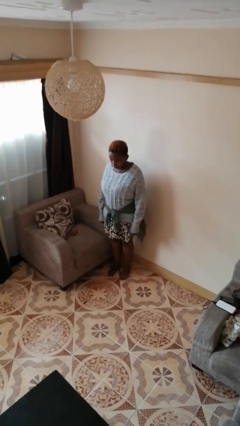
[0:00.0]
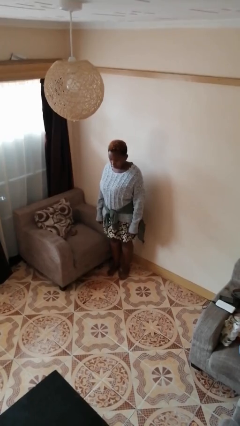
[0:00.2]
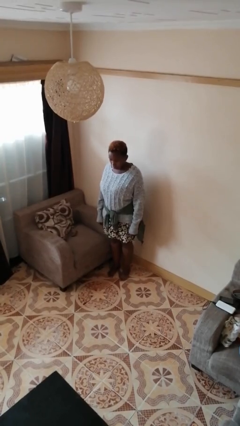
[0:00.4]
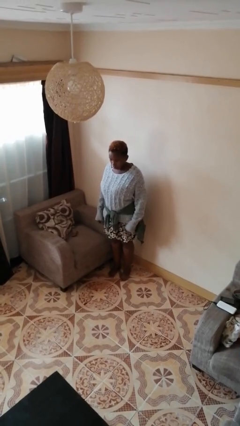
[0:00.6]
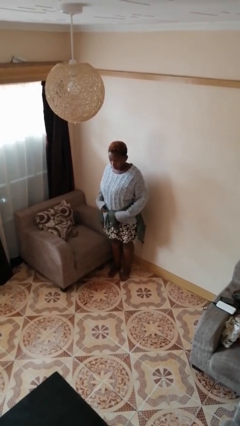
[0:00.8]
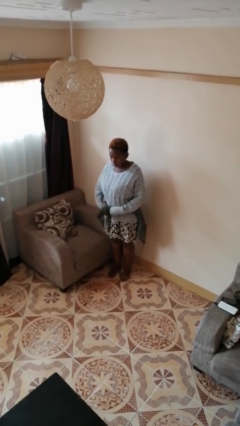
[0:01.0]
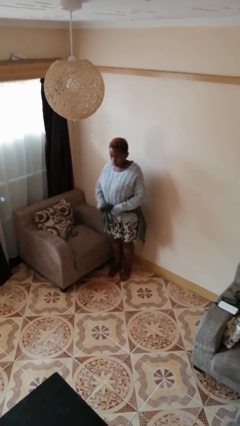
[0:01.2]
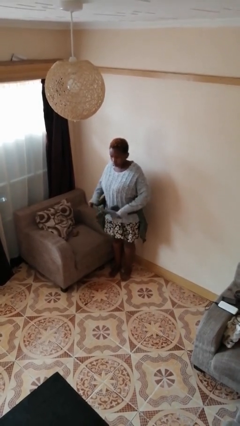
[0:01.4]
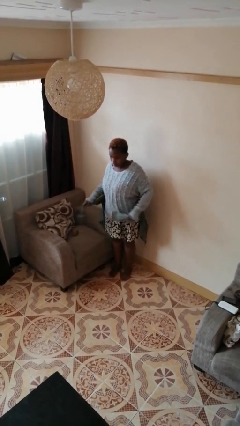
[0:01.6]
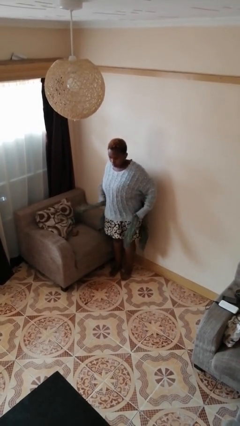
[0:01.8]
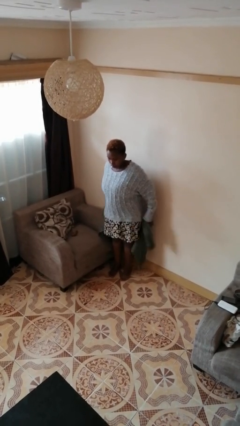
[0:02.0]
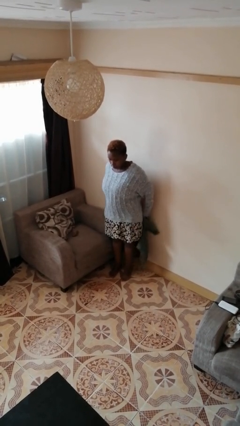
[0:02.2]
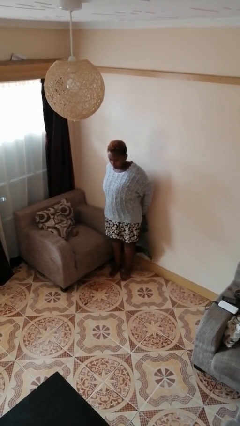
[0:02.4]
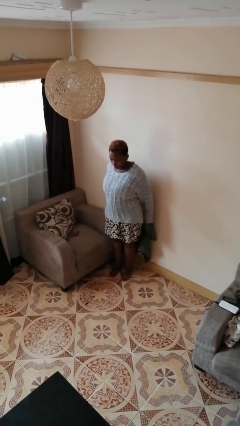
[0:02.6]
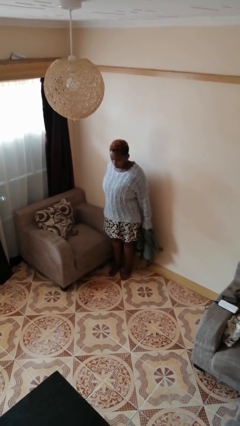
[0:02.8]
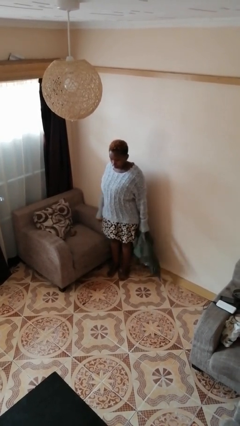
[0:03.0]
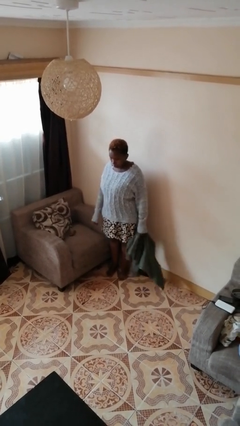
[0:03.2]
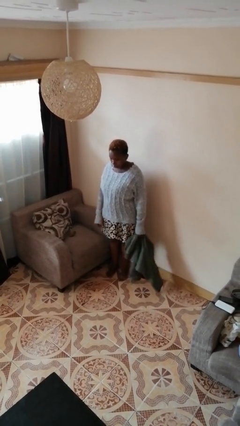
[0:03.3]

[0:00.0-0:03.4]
person unties jacket around waist

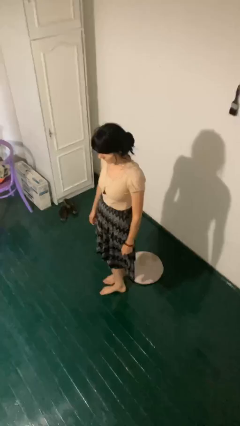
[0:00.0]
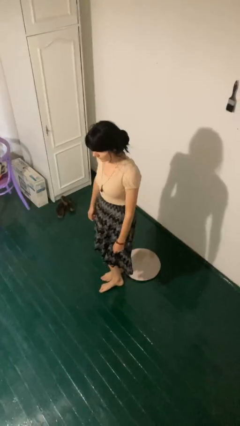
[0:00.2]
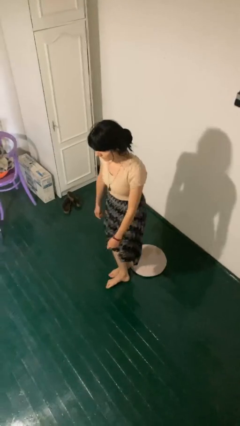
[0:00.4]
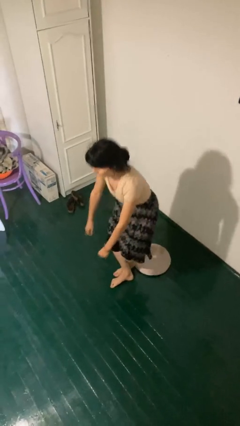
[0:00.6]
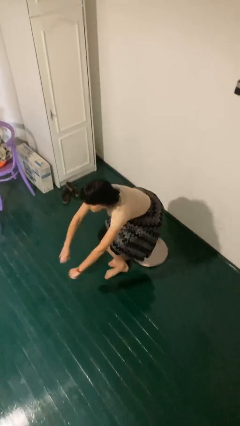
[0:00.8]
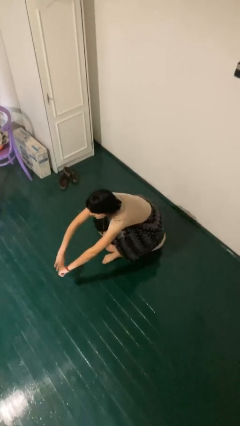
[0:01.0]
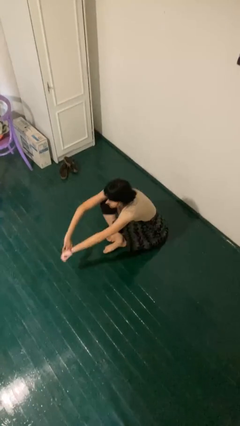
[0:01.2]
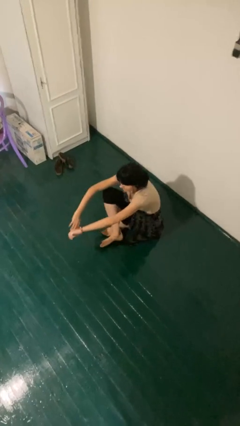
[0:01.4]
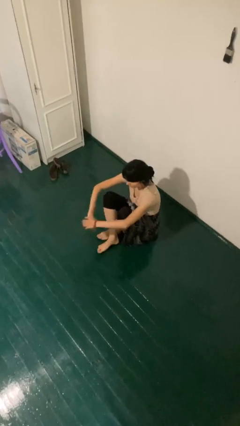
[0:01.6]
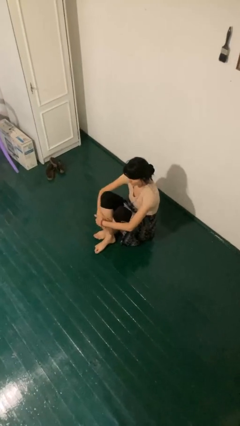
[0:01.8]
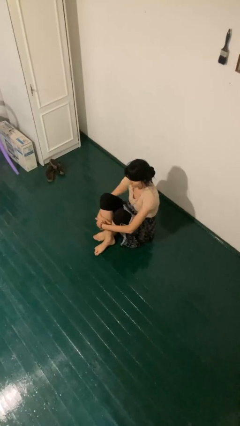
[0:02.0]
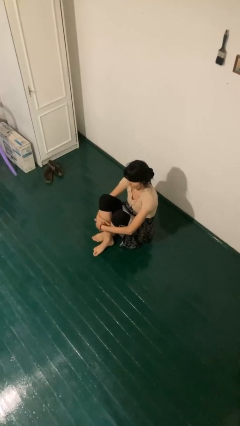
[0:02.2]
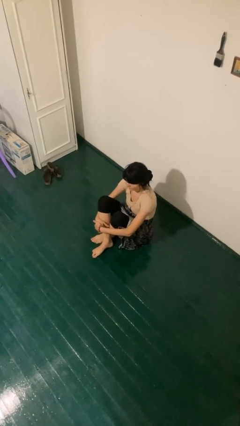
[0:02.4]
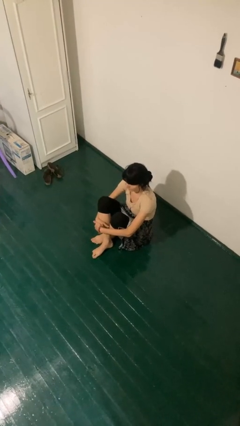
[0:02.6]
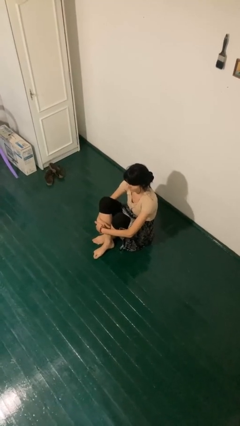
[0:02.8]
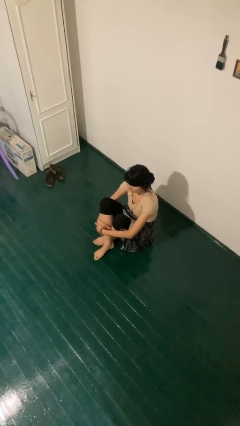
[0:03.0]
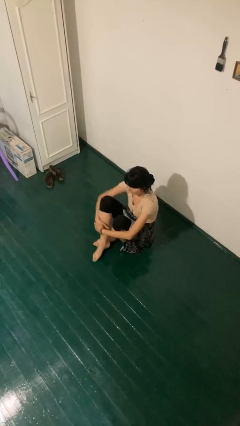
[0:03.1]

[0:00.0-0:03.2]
person sits crisscross

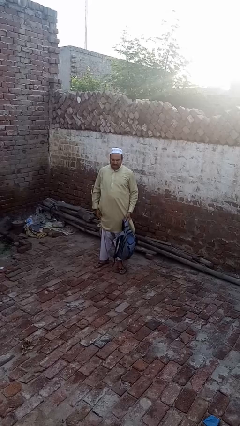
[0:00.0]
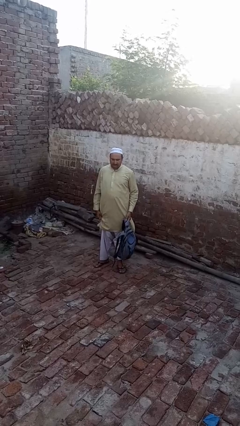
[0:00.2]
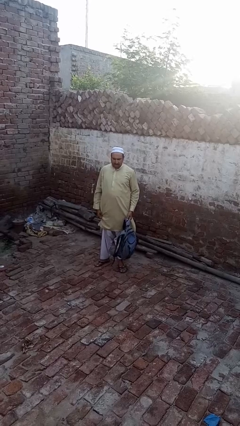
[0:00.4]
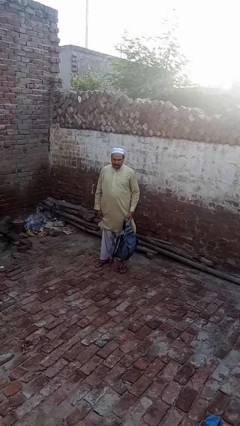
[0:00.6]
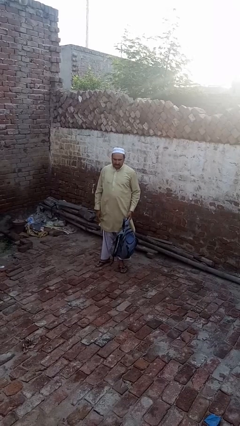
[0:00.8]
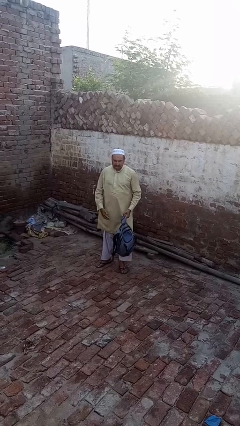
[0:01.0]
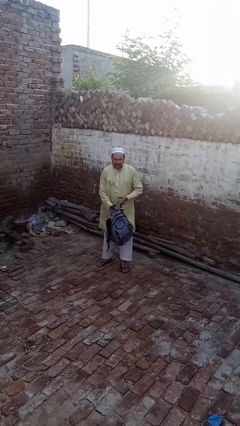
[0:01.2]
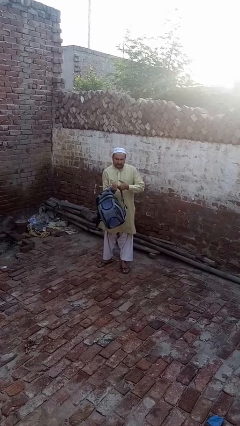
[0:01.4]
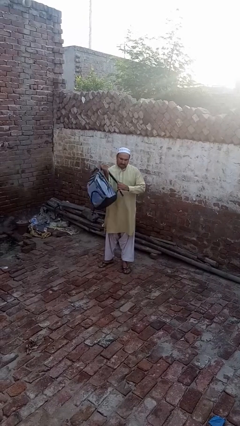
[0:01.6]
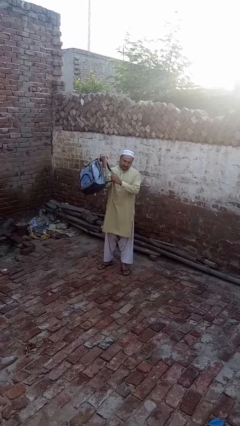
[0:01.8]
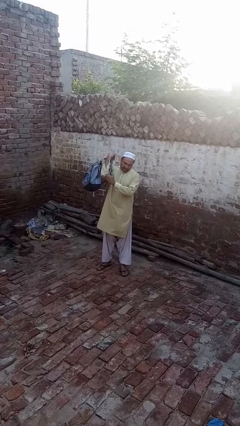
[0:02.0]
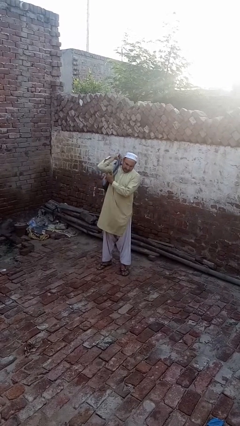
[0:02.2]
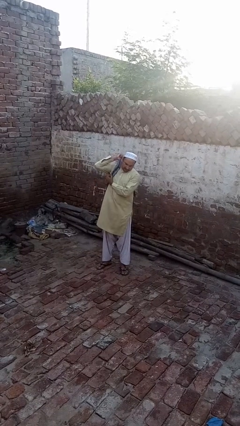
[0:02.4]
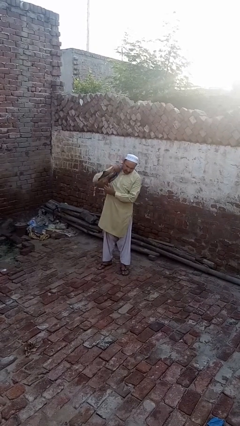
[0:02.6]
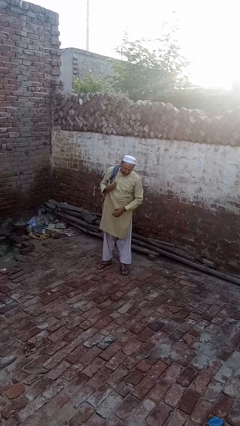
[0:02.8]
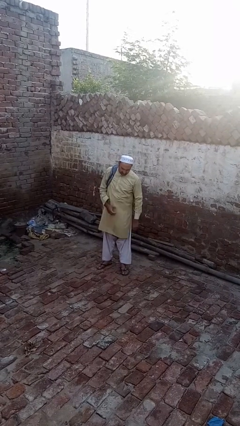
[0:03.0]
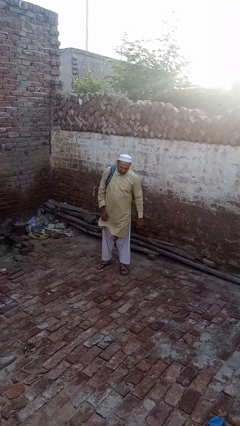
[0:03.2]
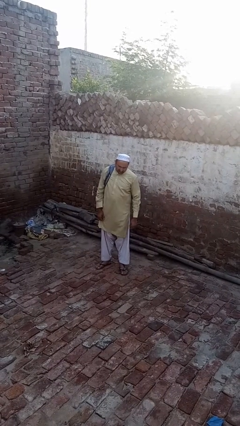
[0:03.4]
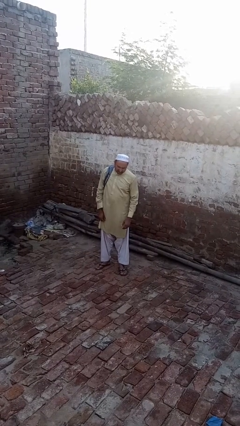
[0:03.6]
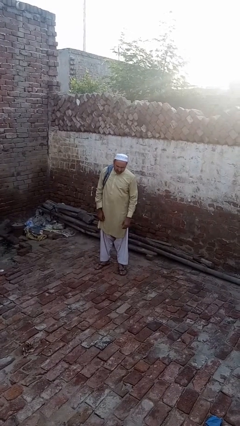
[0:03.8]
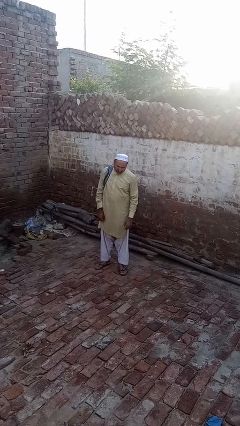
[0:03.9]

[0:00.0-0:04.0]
person puts on backpack

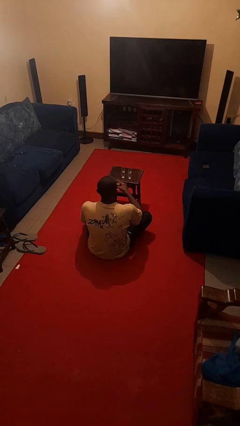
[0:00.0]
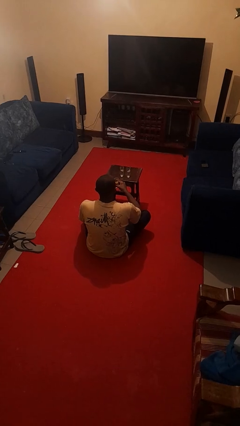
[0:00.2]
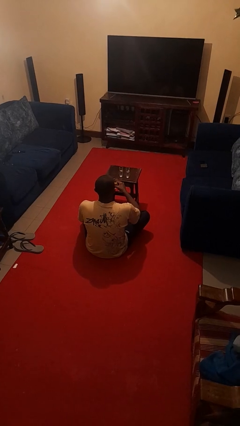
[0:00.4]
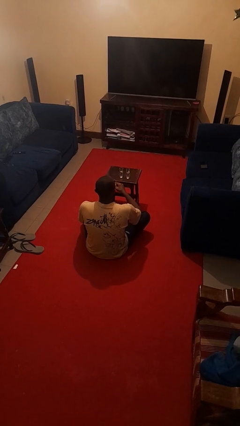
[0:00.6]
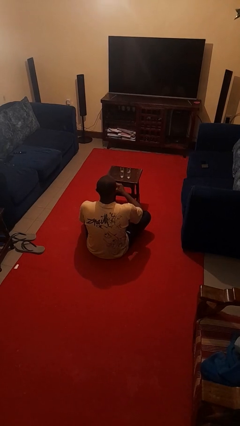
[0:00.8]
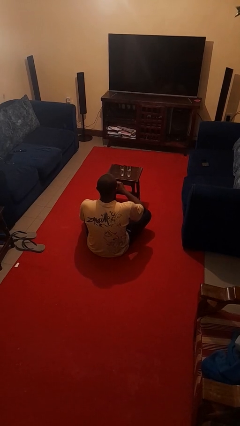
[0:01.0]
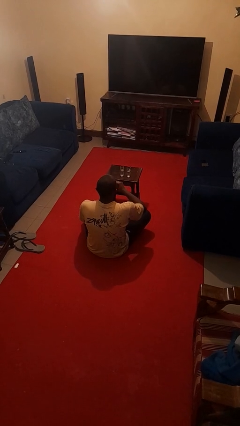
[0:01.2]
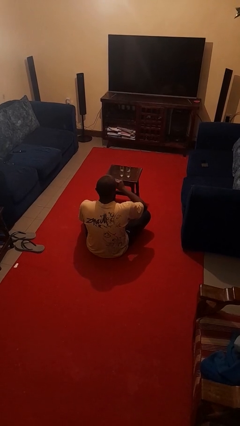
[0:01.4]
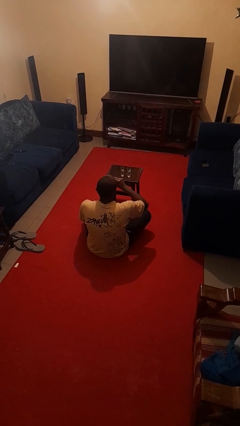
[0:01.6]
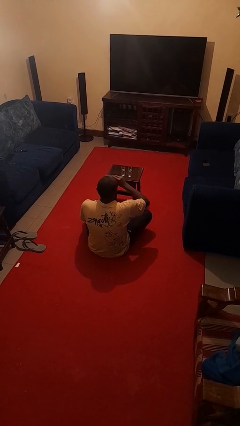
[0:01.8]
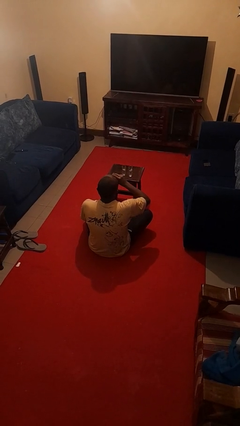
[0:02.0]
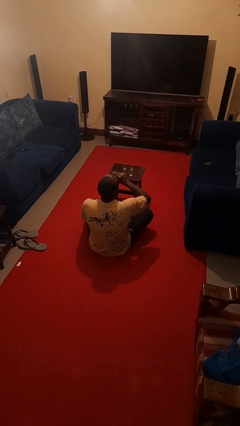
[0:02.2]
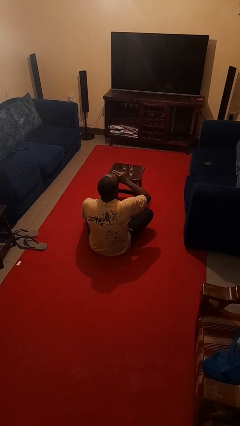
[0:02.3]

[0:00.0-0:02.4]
person drinks from shotglass

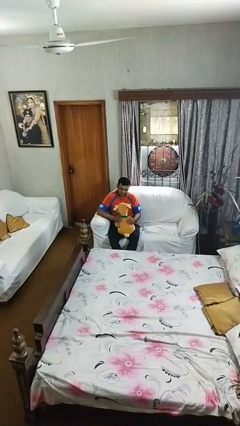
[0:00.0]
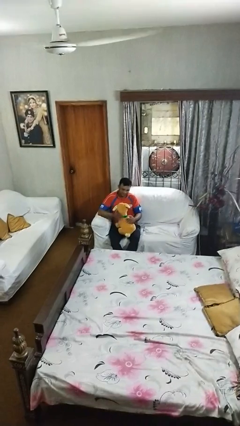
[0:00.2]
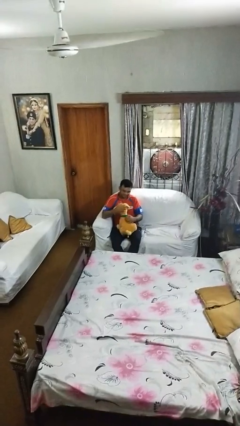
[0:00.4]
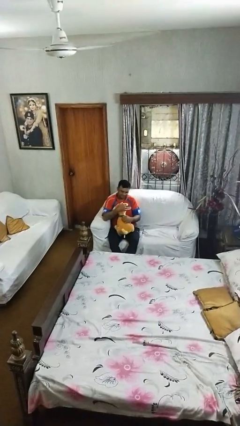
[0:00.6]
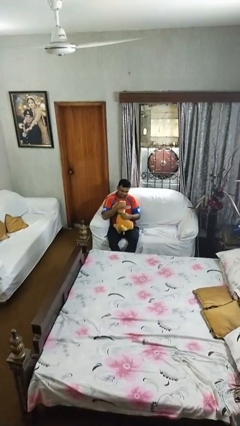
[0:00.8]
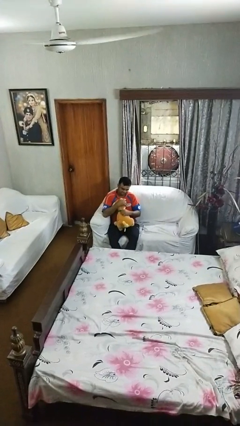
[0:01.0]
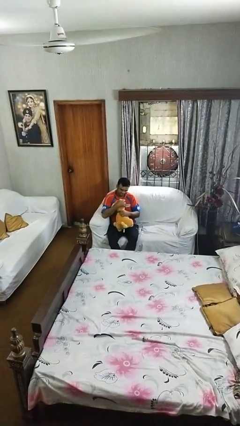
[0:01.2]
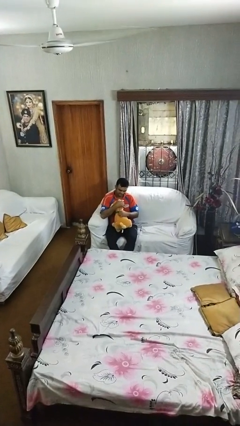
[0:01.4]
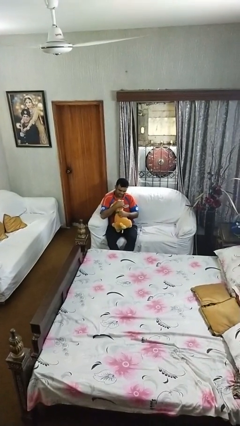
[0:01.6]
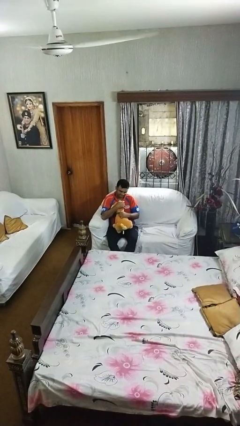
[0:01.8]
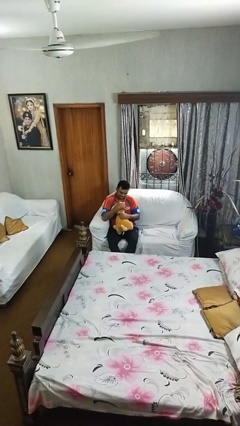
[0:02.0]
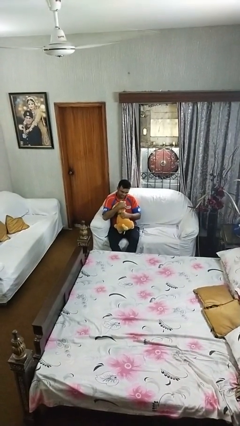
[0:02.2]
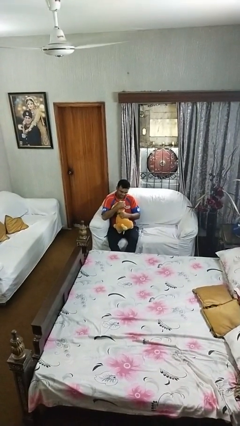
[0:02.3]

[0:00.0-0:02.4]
person hugs stuffed animal

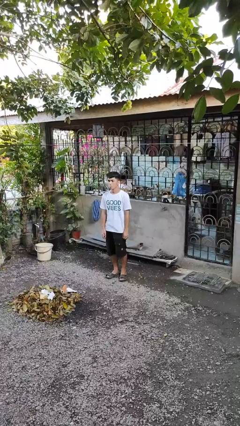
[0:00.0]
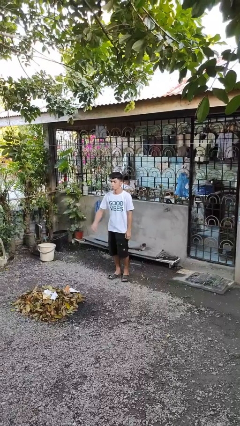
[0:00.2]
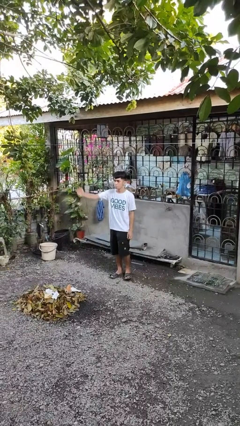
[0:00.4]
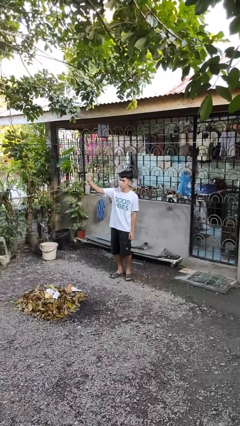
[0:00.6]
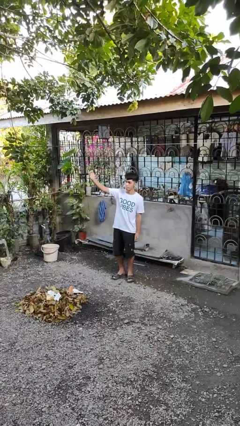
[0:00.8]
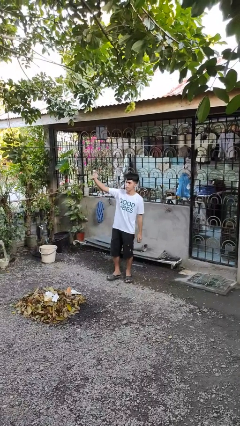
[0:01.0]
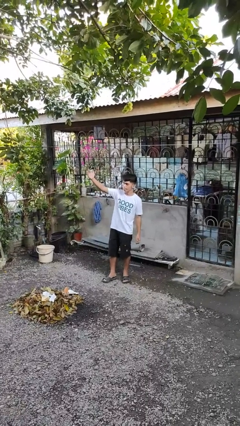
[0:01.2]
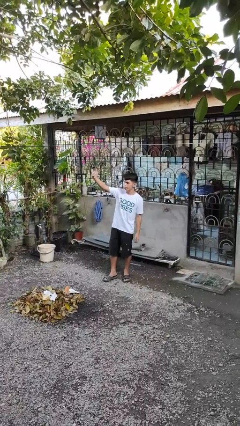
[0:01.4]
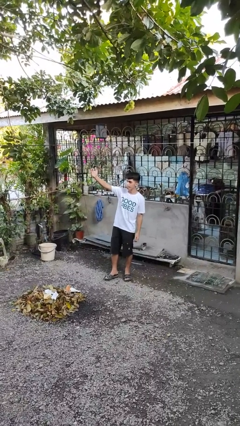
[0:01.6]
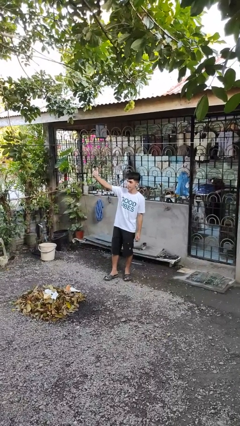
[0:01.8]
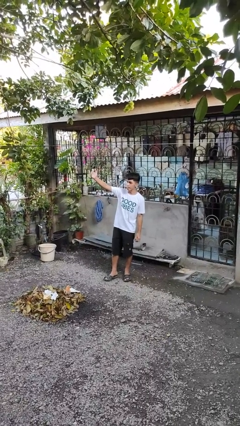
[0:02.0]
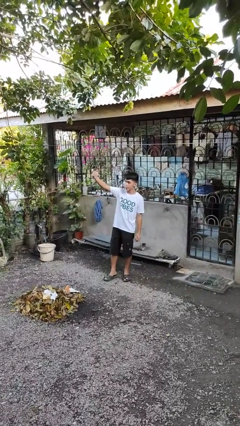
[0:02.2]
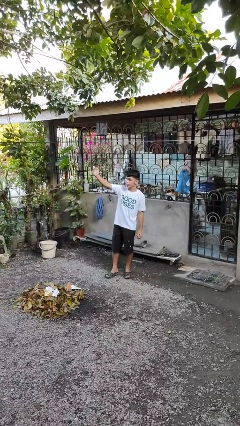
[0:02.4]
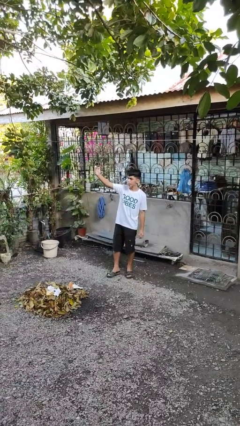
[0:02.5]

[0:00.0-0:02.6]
person gestures come here
